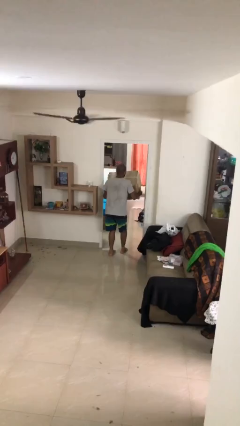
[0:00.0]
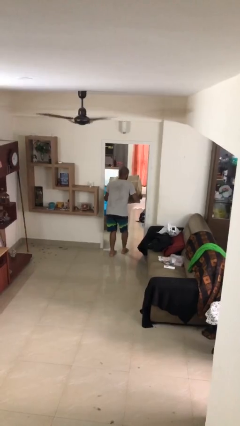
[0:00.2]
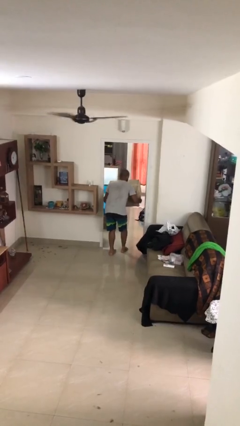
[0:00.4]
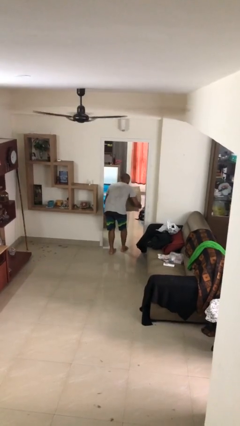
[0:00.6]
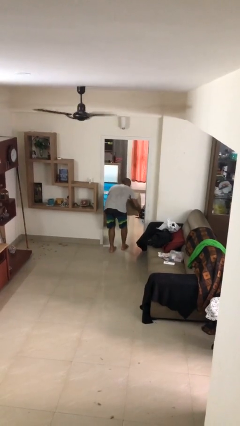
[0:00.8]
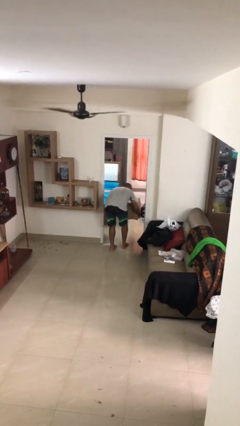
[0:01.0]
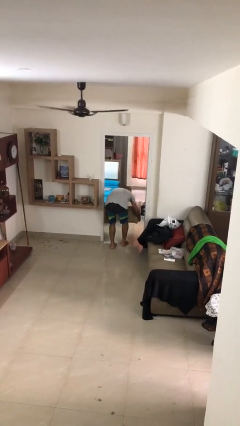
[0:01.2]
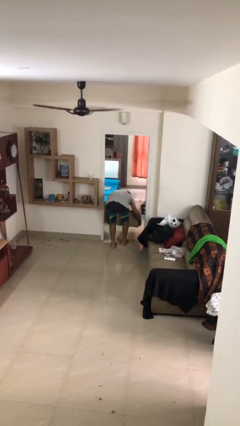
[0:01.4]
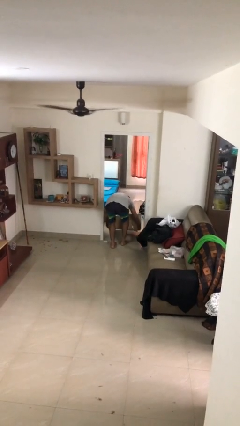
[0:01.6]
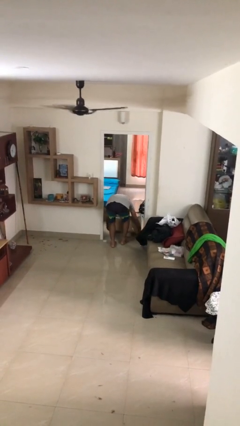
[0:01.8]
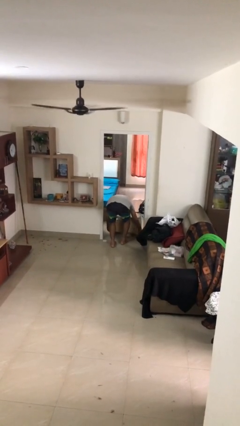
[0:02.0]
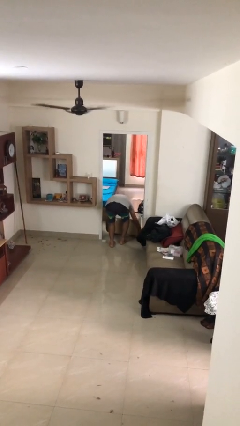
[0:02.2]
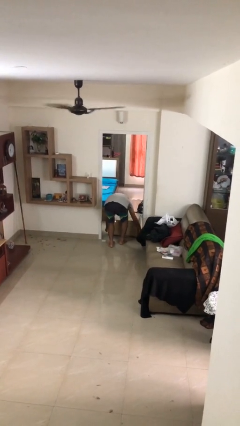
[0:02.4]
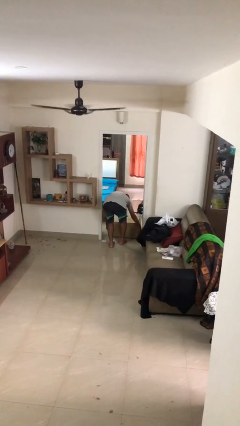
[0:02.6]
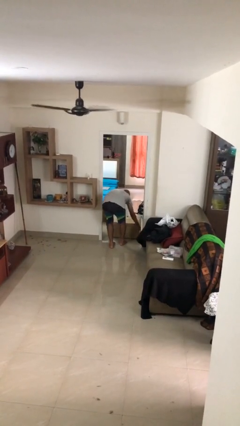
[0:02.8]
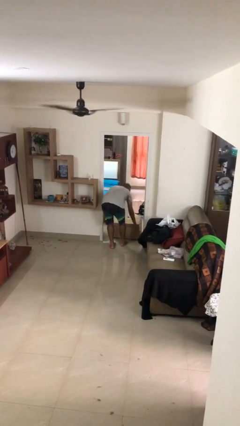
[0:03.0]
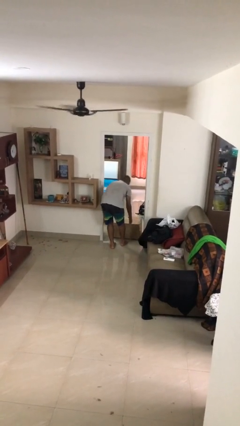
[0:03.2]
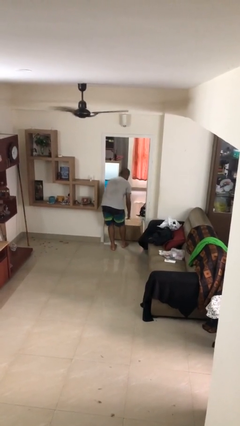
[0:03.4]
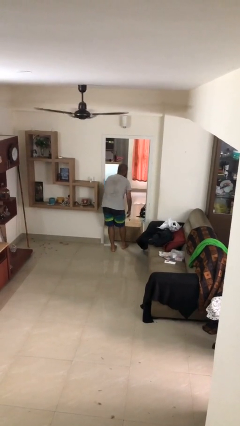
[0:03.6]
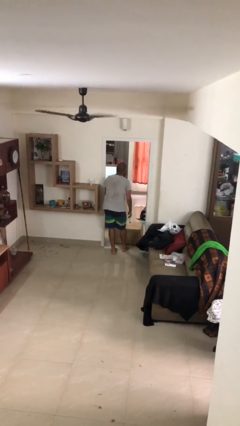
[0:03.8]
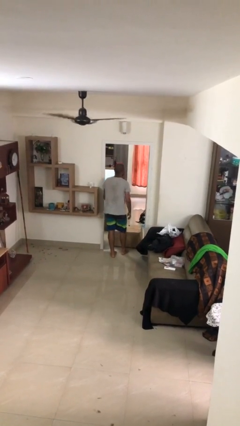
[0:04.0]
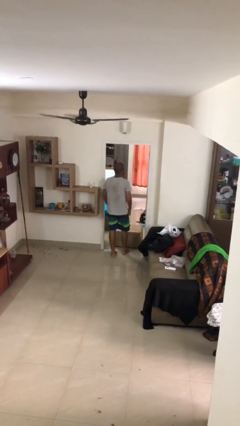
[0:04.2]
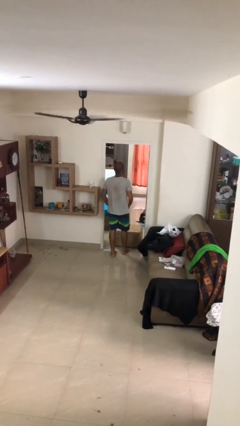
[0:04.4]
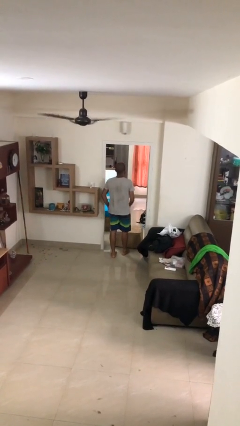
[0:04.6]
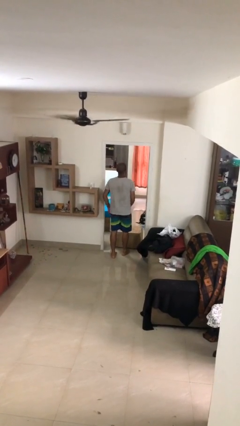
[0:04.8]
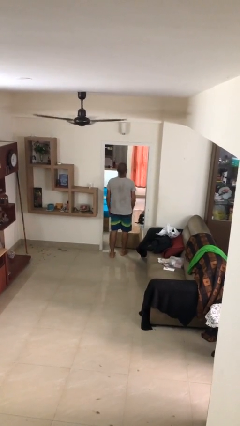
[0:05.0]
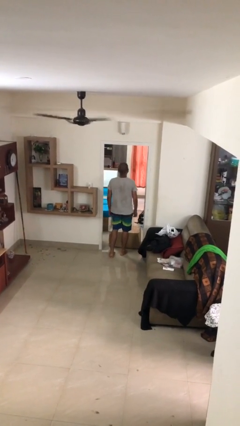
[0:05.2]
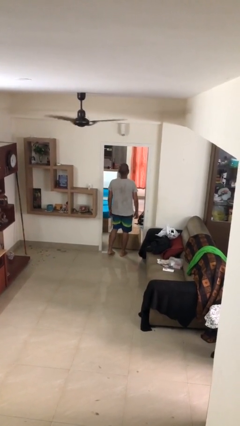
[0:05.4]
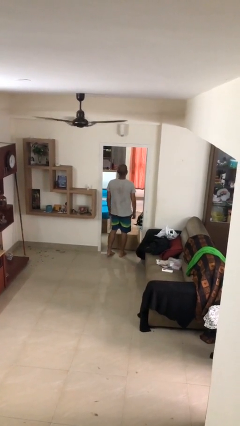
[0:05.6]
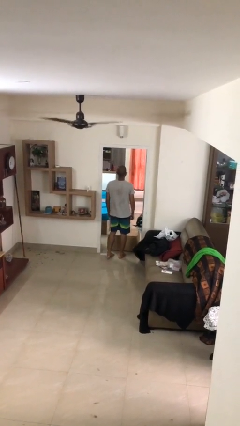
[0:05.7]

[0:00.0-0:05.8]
person puts down object on floor

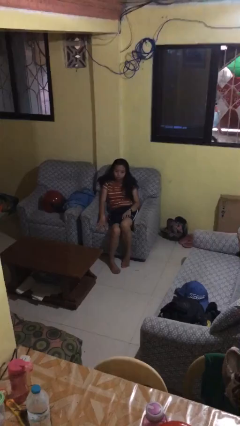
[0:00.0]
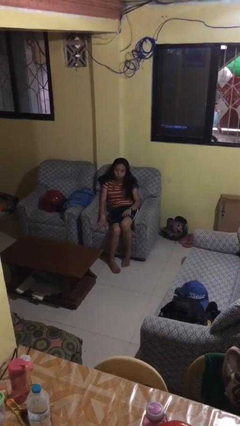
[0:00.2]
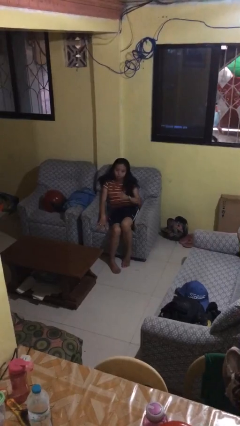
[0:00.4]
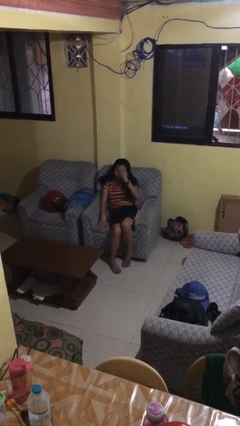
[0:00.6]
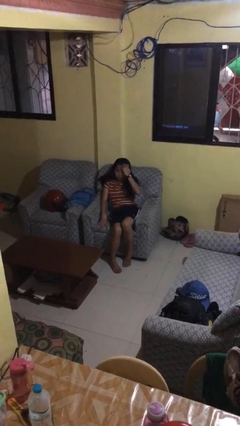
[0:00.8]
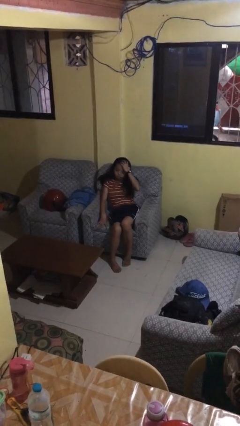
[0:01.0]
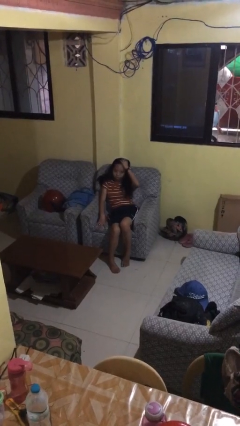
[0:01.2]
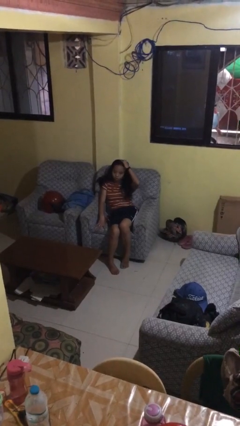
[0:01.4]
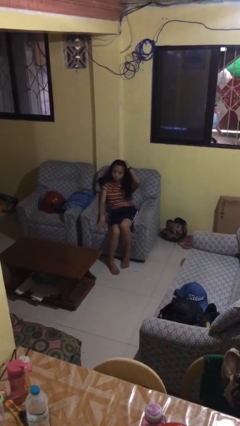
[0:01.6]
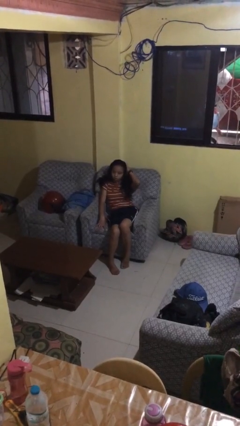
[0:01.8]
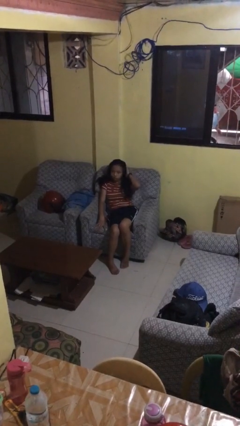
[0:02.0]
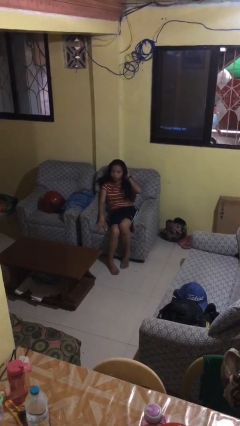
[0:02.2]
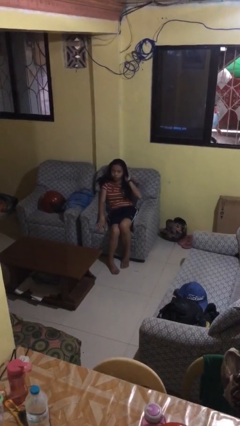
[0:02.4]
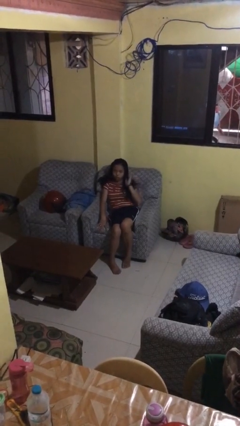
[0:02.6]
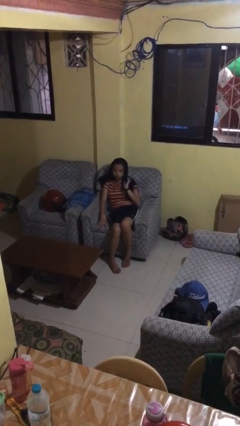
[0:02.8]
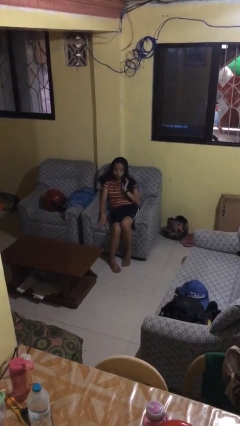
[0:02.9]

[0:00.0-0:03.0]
person strokes hair

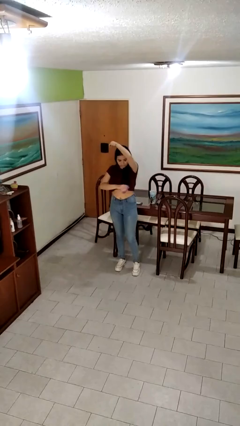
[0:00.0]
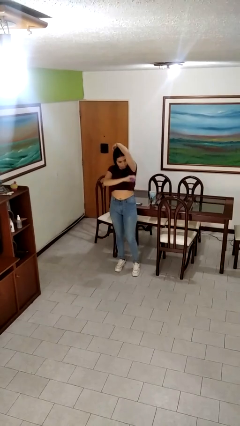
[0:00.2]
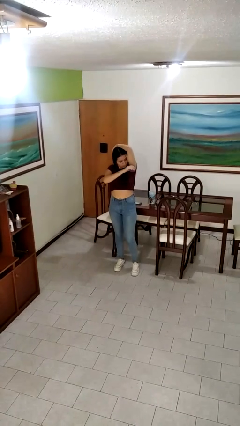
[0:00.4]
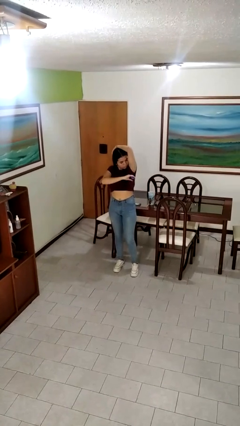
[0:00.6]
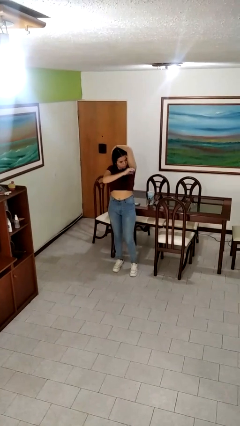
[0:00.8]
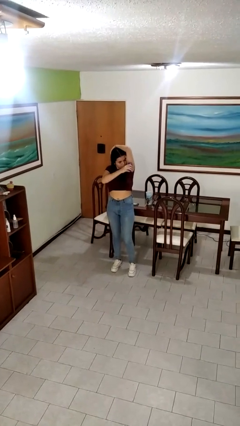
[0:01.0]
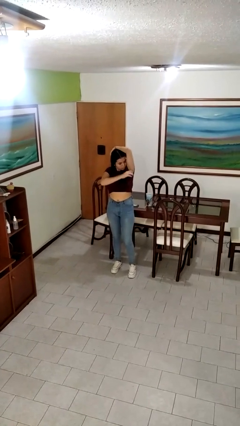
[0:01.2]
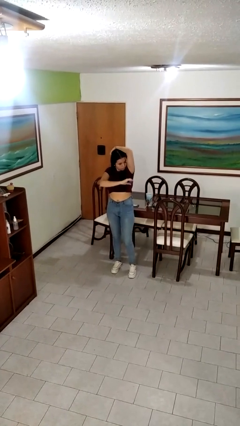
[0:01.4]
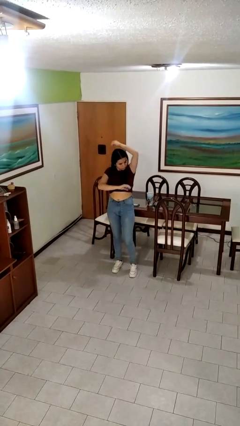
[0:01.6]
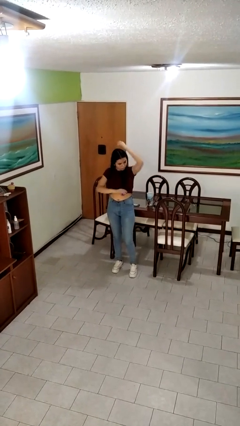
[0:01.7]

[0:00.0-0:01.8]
person applies deodorant

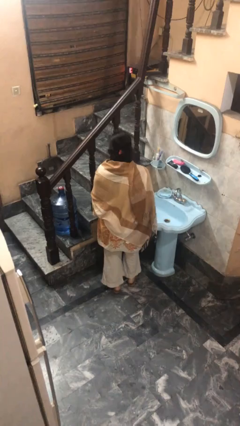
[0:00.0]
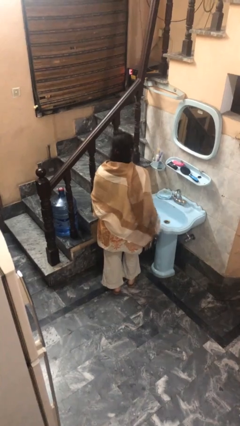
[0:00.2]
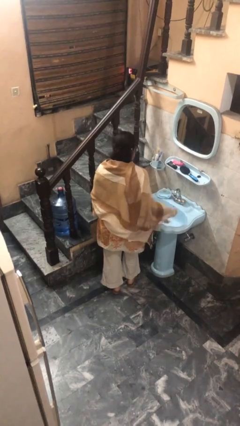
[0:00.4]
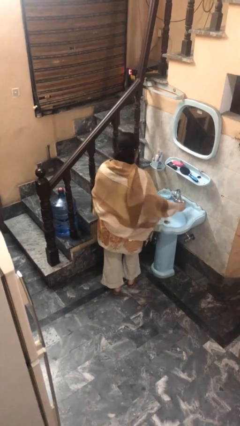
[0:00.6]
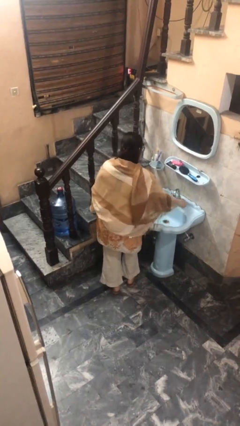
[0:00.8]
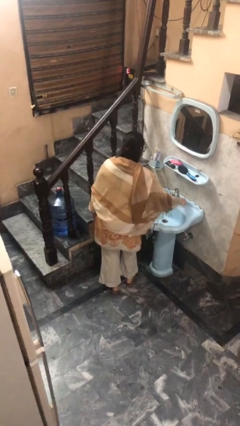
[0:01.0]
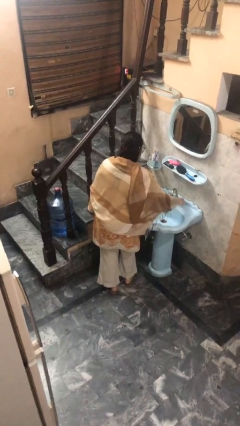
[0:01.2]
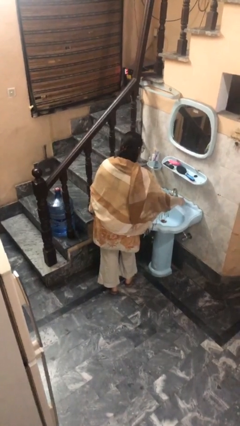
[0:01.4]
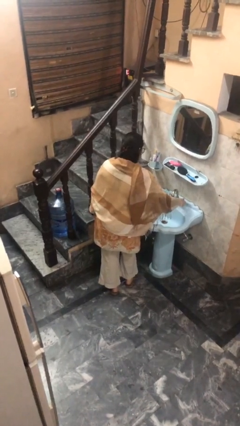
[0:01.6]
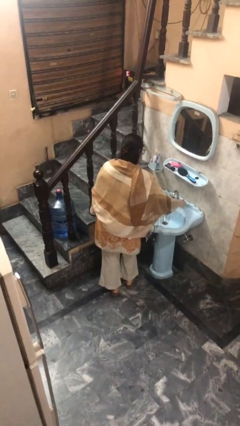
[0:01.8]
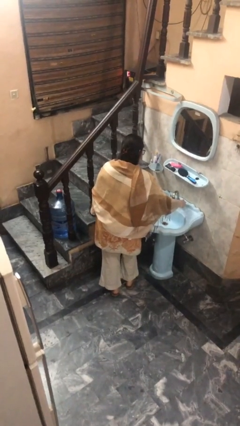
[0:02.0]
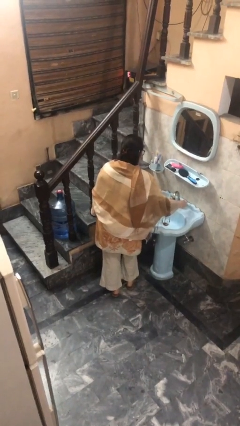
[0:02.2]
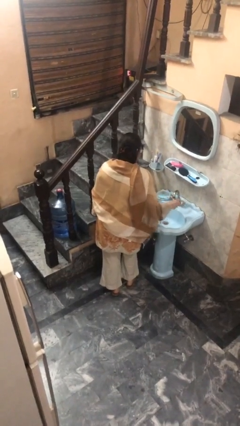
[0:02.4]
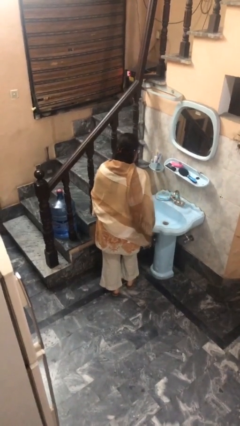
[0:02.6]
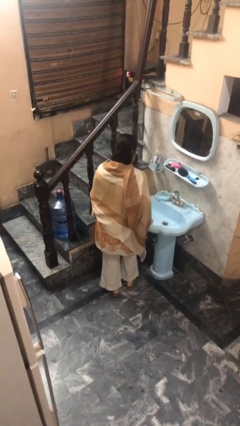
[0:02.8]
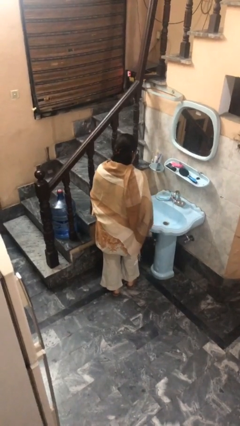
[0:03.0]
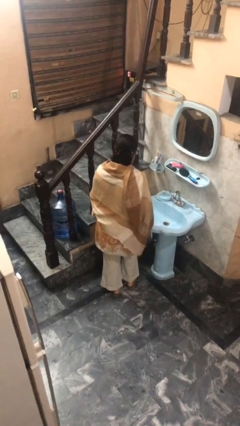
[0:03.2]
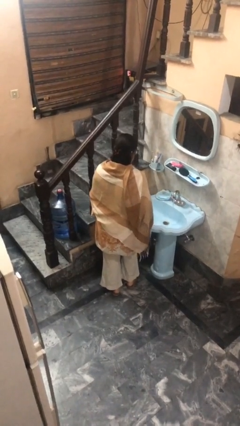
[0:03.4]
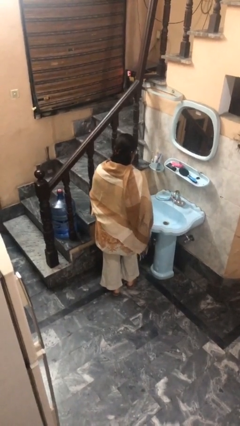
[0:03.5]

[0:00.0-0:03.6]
person turns on faucet

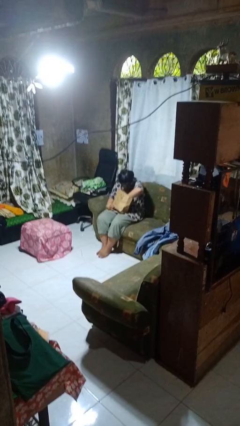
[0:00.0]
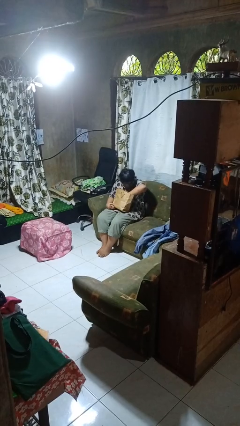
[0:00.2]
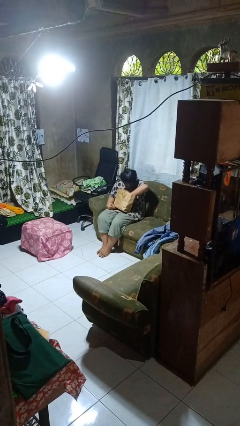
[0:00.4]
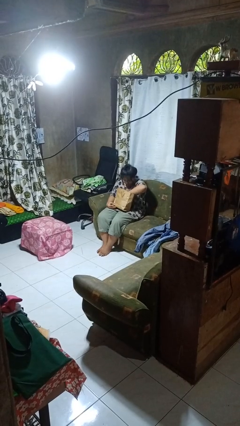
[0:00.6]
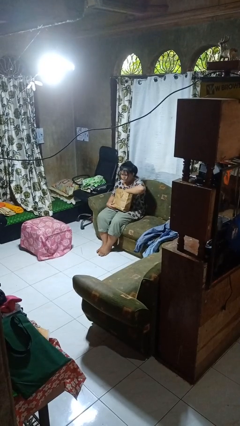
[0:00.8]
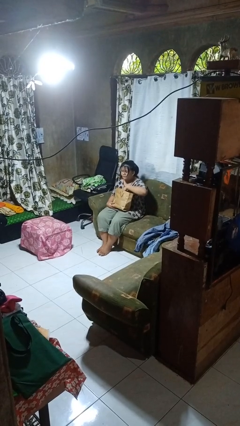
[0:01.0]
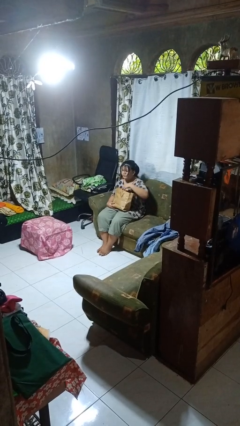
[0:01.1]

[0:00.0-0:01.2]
person searches in bag

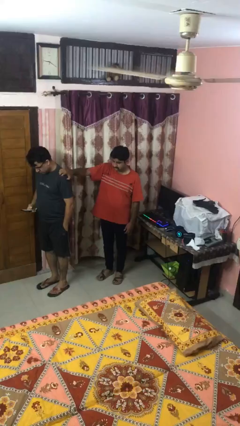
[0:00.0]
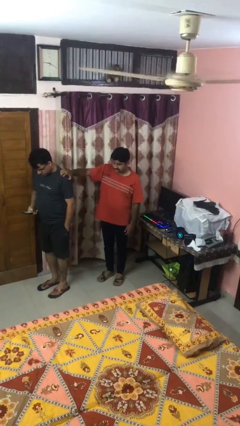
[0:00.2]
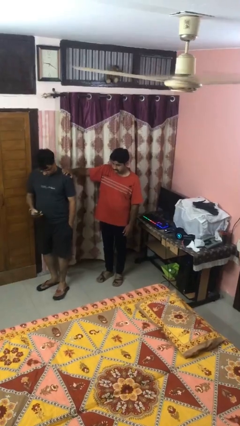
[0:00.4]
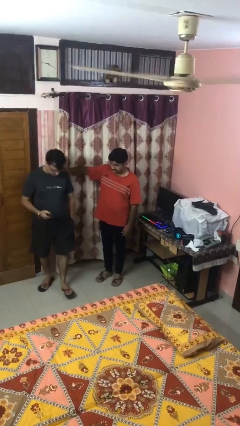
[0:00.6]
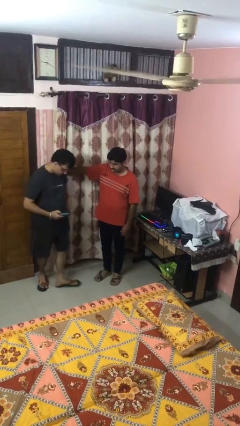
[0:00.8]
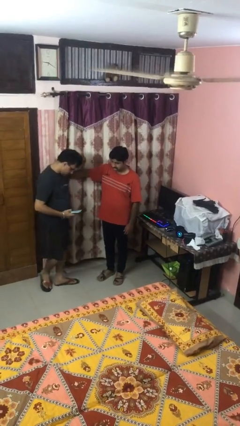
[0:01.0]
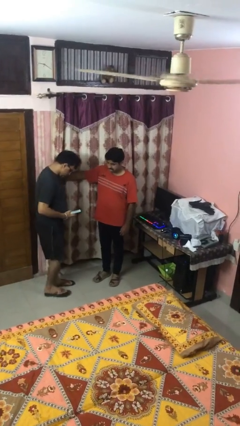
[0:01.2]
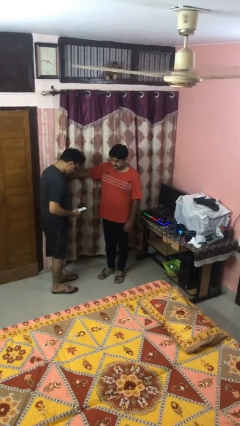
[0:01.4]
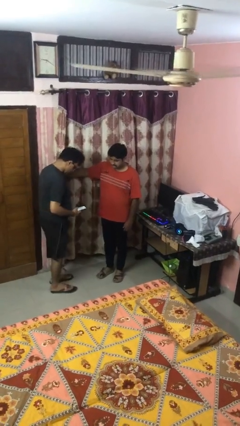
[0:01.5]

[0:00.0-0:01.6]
person spins person around

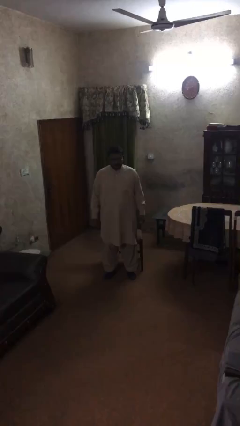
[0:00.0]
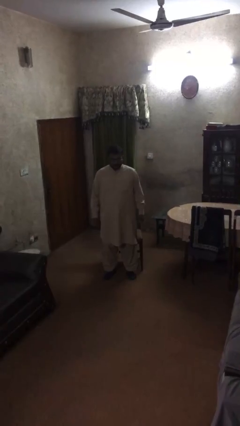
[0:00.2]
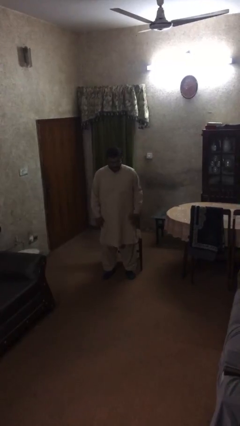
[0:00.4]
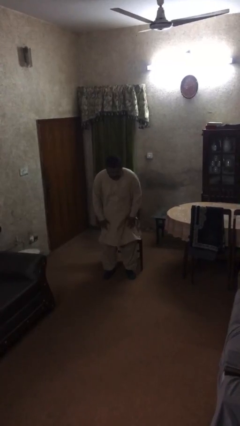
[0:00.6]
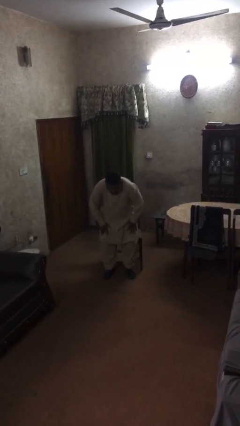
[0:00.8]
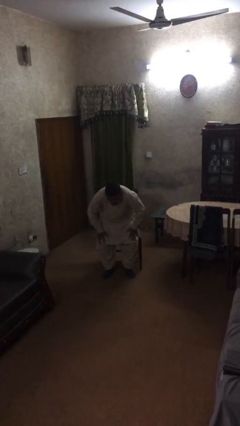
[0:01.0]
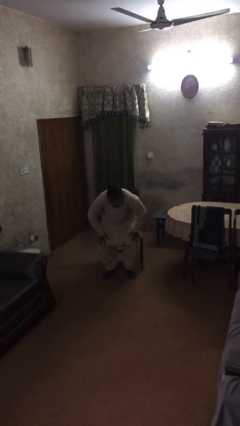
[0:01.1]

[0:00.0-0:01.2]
person stands up
